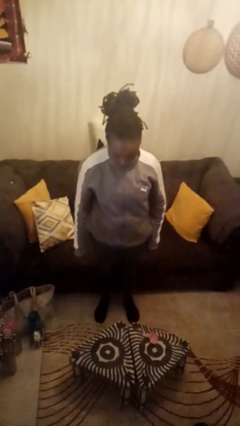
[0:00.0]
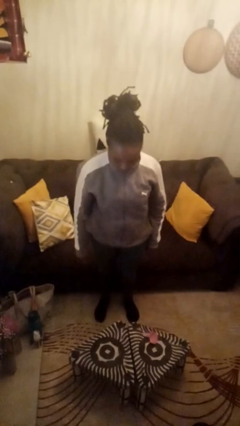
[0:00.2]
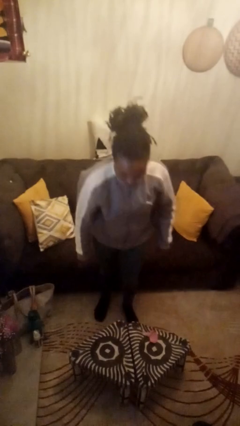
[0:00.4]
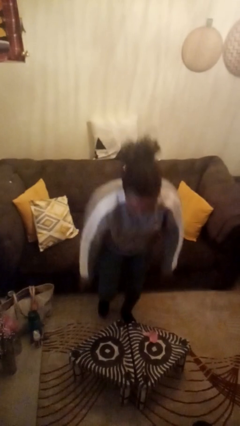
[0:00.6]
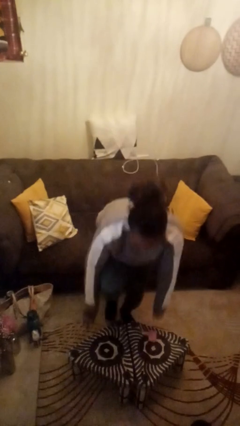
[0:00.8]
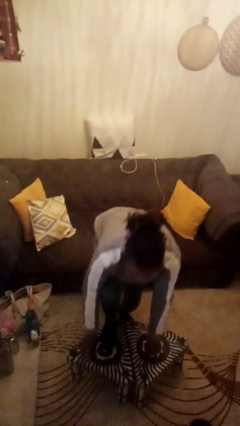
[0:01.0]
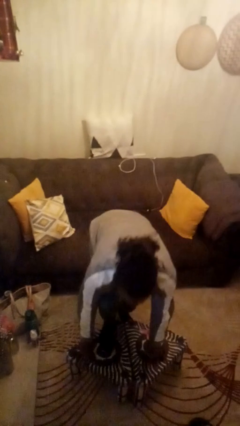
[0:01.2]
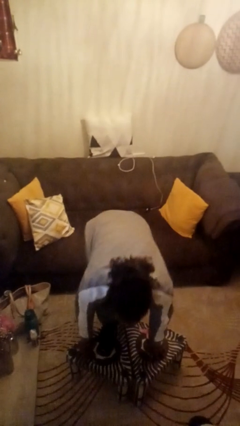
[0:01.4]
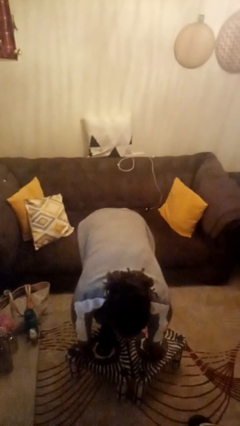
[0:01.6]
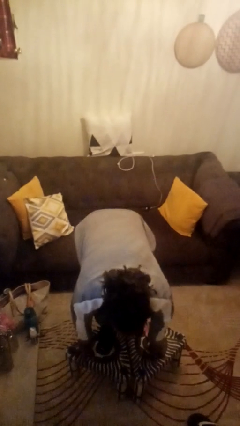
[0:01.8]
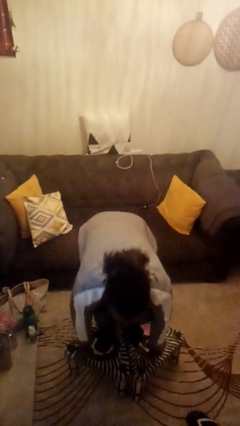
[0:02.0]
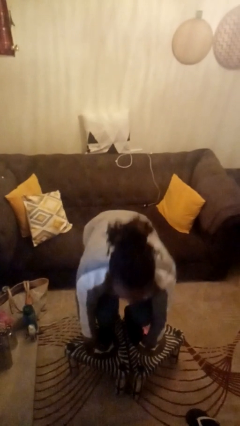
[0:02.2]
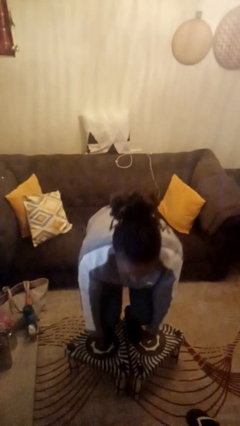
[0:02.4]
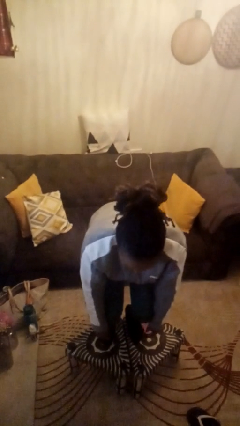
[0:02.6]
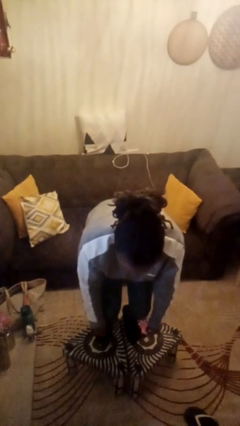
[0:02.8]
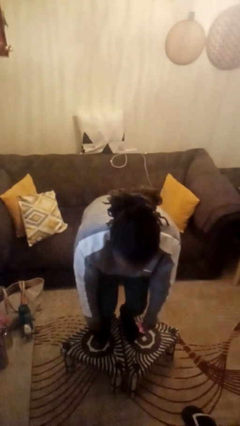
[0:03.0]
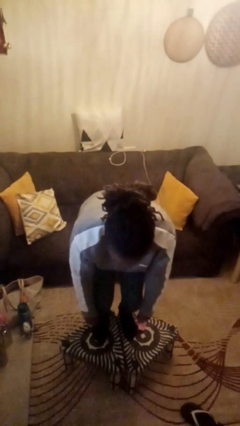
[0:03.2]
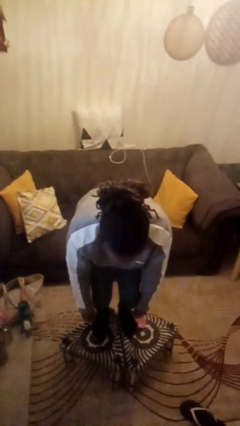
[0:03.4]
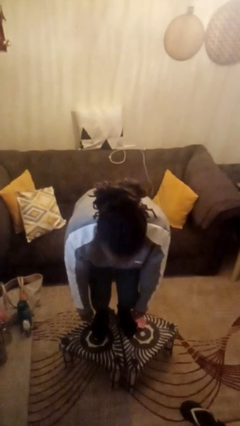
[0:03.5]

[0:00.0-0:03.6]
person climbs on table

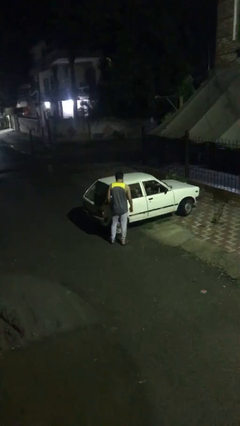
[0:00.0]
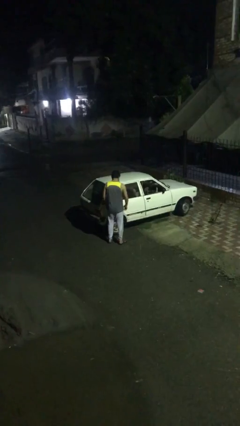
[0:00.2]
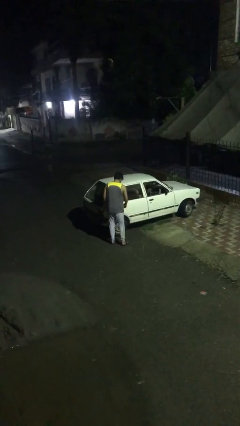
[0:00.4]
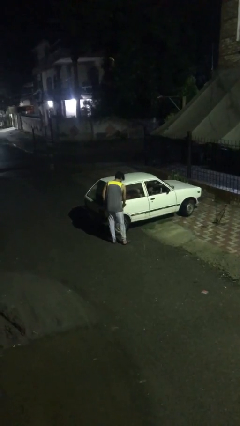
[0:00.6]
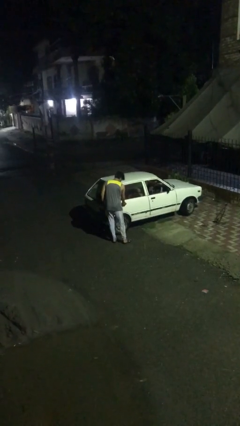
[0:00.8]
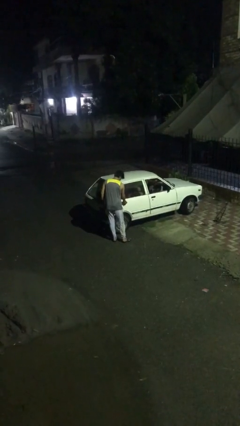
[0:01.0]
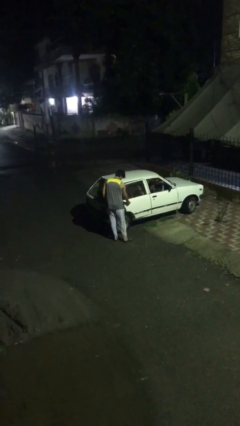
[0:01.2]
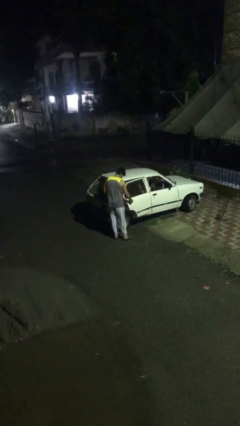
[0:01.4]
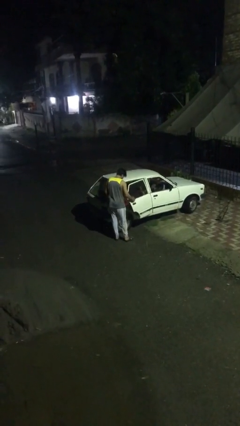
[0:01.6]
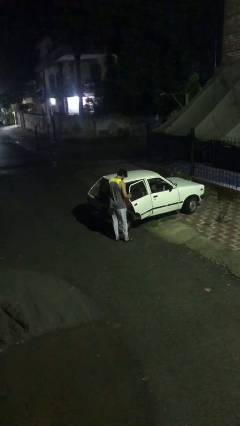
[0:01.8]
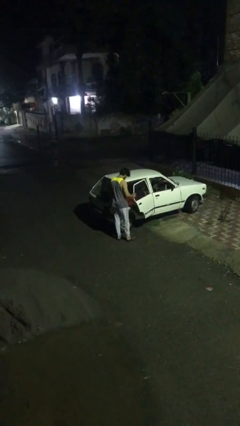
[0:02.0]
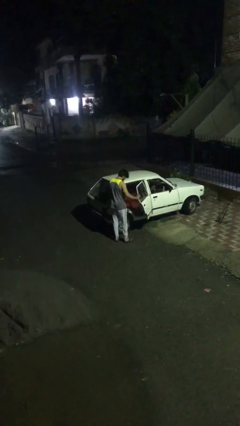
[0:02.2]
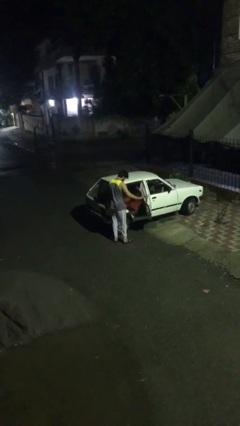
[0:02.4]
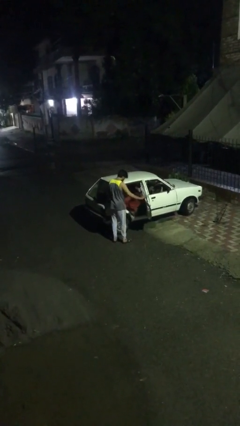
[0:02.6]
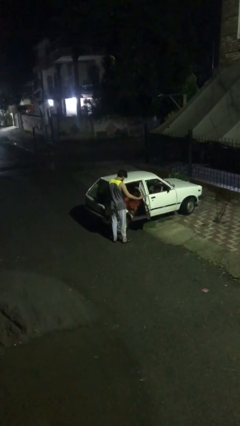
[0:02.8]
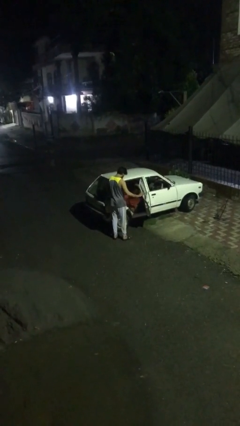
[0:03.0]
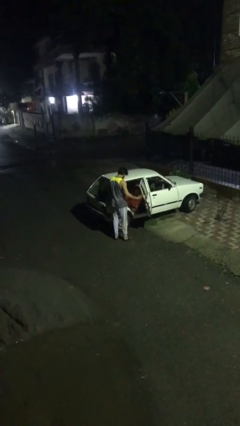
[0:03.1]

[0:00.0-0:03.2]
person opens car door

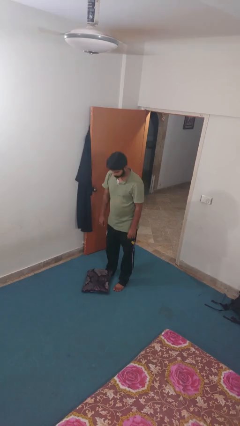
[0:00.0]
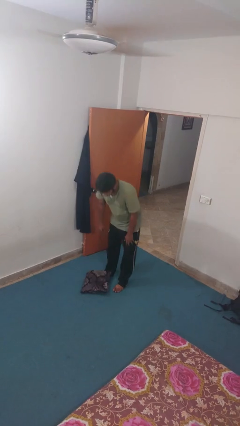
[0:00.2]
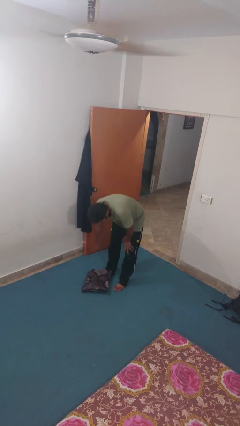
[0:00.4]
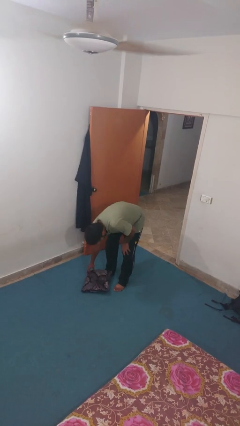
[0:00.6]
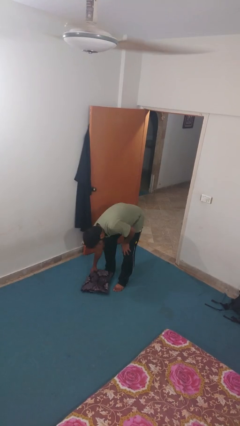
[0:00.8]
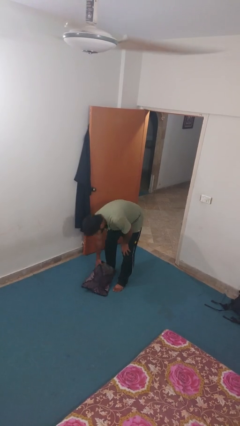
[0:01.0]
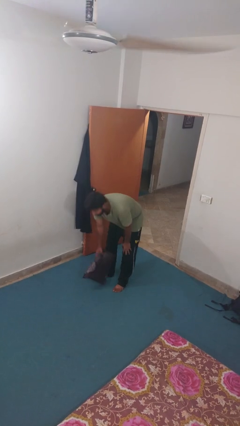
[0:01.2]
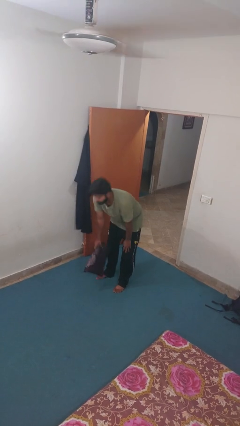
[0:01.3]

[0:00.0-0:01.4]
person picks up object from floor

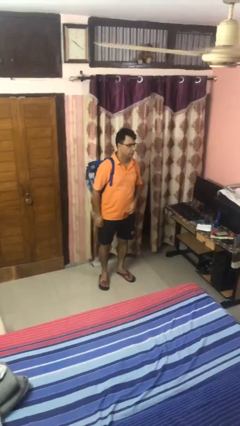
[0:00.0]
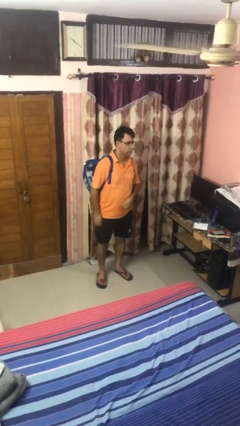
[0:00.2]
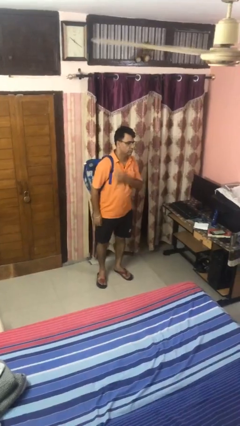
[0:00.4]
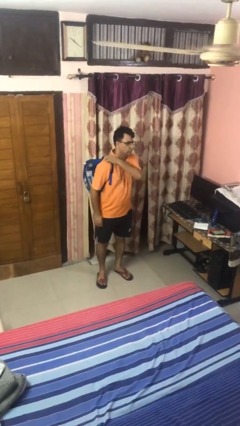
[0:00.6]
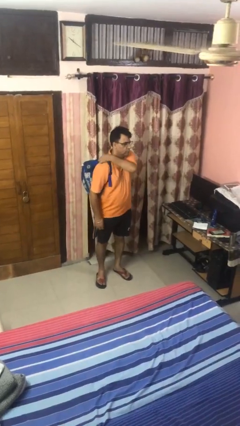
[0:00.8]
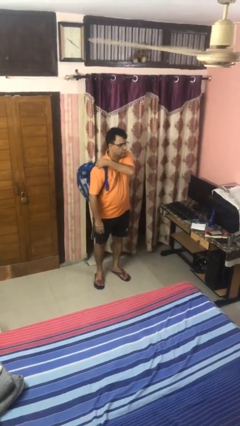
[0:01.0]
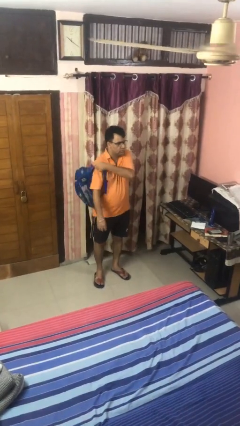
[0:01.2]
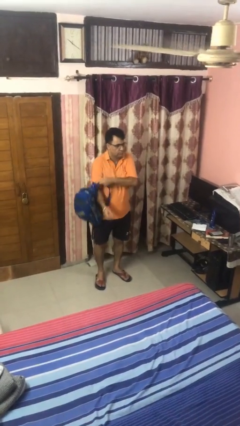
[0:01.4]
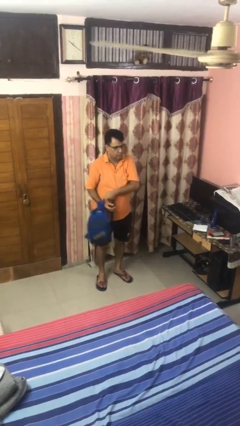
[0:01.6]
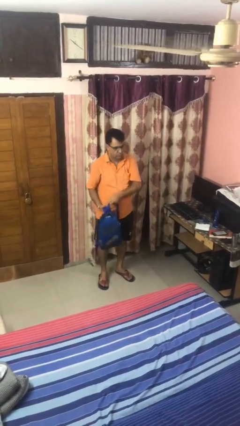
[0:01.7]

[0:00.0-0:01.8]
person takes off backpack

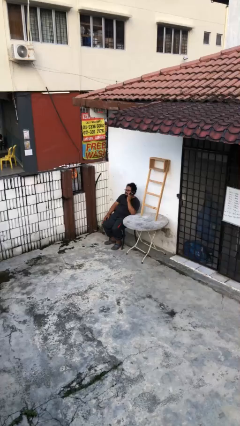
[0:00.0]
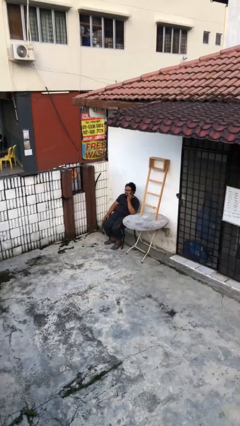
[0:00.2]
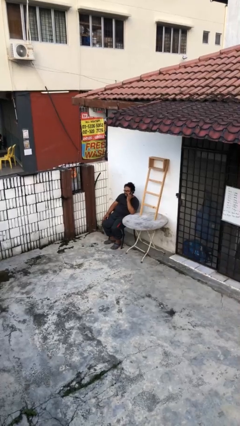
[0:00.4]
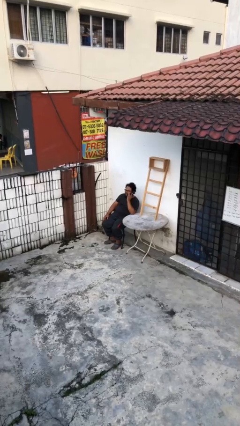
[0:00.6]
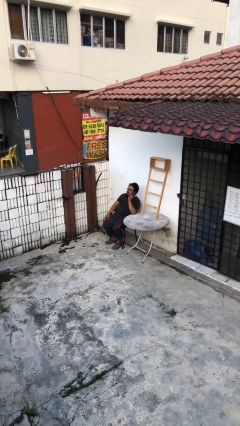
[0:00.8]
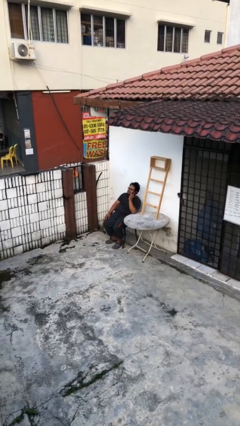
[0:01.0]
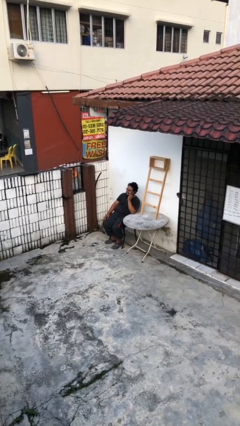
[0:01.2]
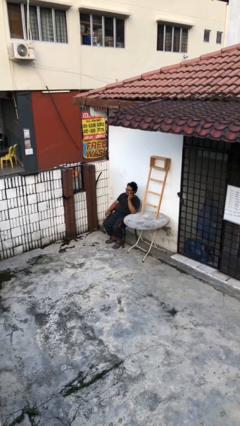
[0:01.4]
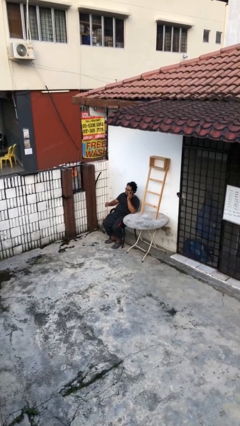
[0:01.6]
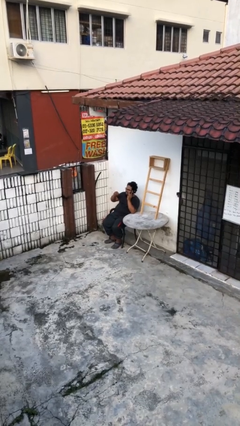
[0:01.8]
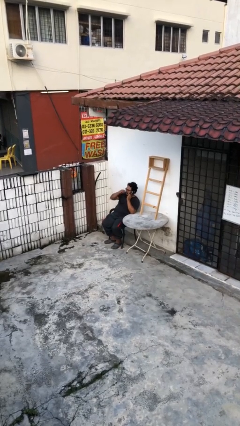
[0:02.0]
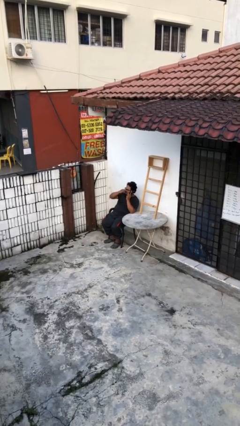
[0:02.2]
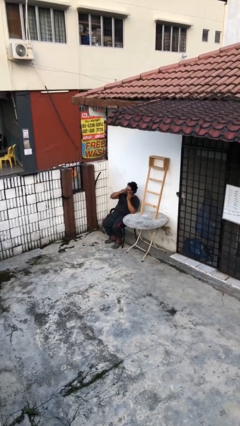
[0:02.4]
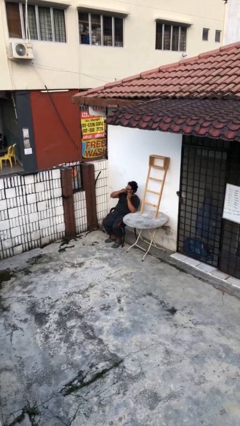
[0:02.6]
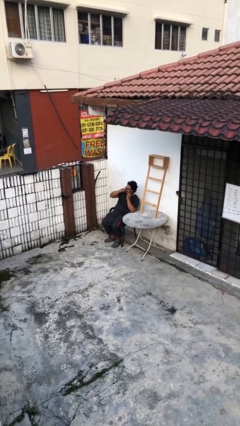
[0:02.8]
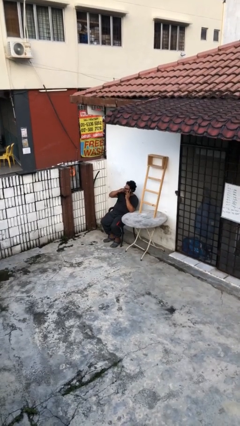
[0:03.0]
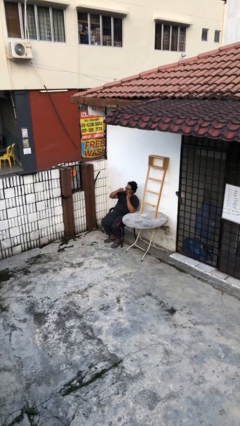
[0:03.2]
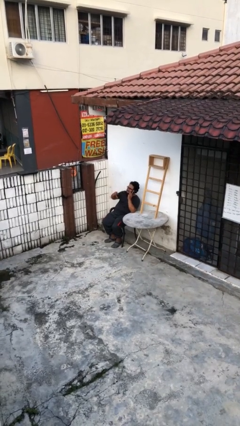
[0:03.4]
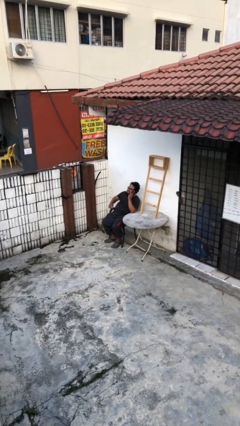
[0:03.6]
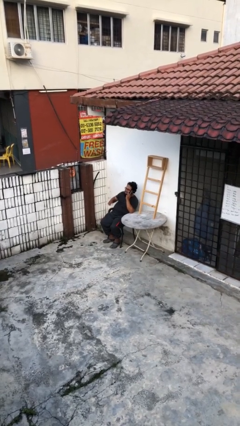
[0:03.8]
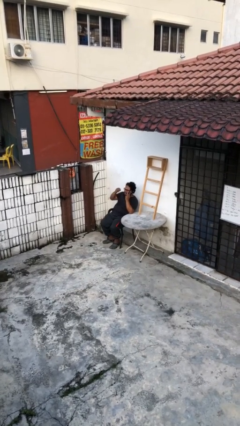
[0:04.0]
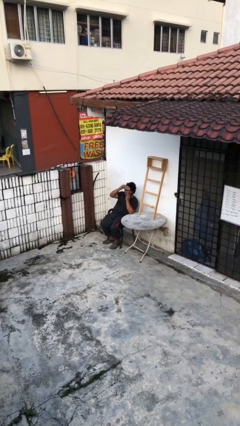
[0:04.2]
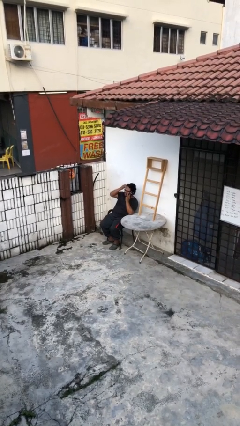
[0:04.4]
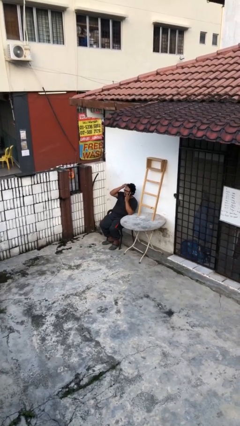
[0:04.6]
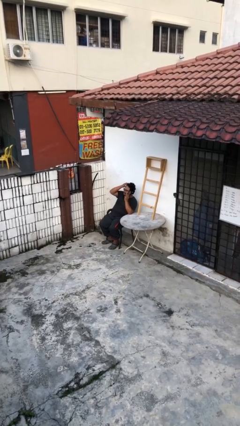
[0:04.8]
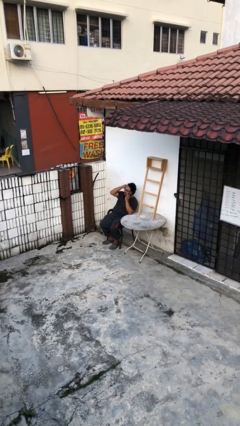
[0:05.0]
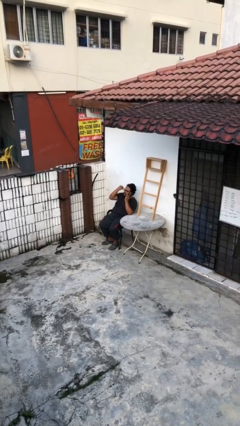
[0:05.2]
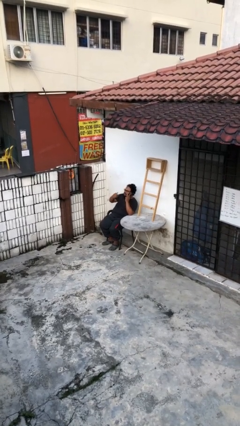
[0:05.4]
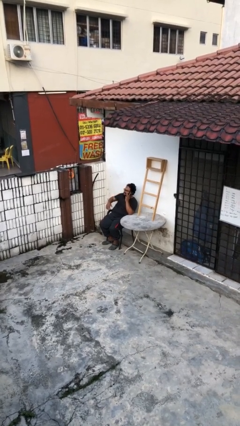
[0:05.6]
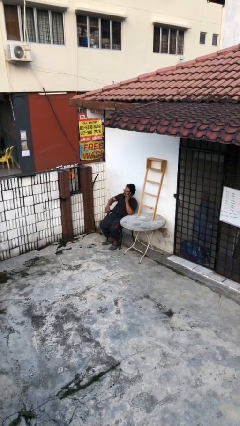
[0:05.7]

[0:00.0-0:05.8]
person talks on phone

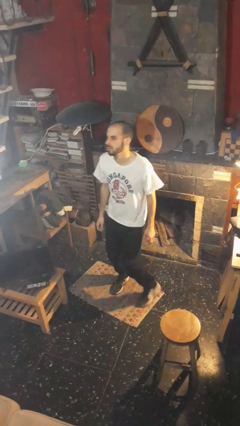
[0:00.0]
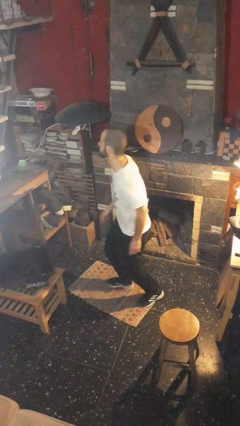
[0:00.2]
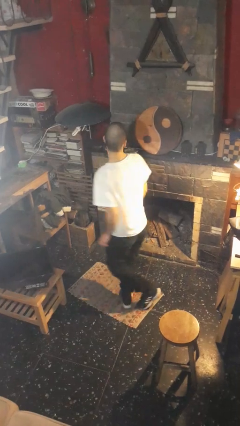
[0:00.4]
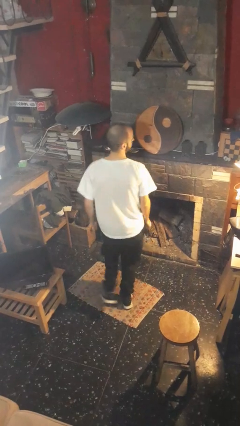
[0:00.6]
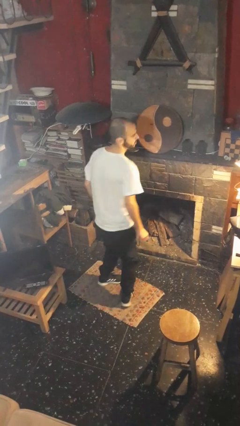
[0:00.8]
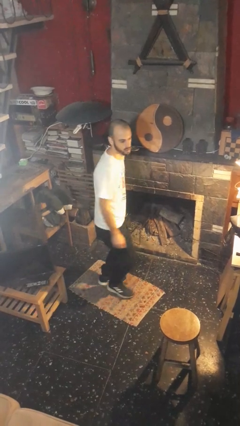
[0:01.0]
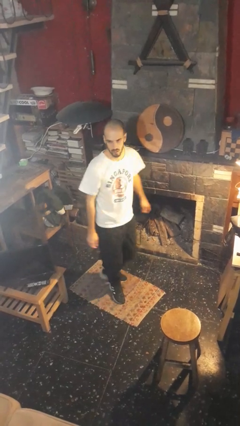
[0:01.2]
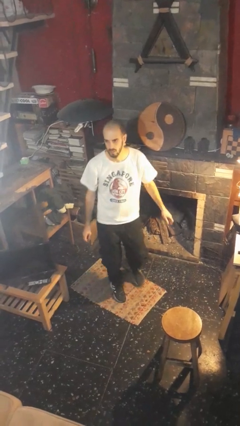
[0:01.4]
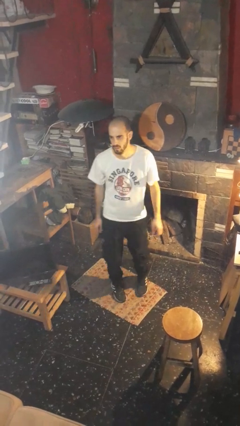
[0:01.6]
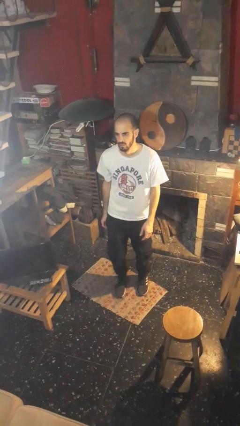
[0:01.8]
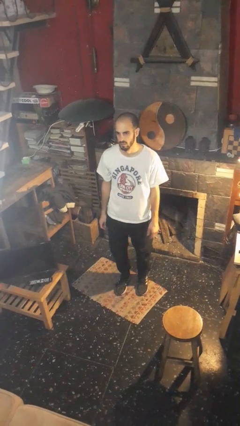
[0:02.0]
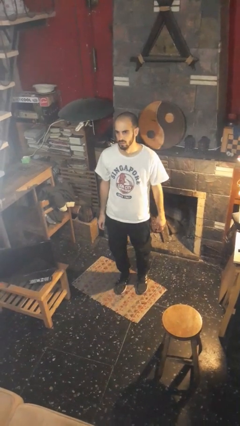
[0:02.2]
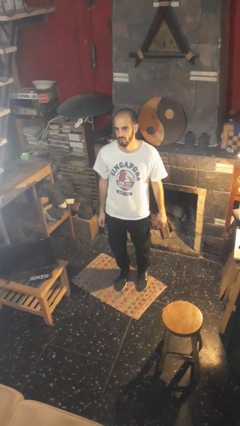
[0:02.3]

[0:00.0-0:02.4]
person twirls
